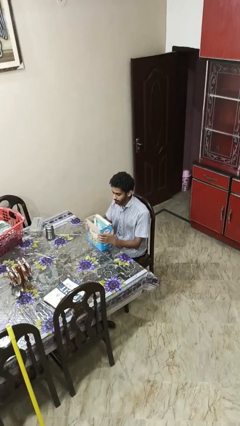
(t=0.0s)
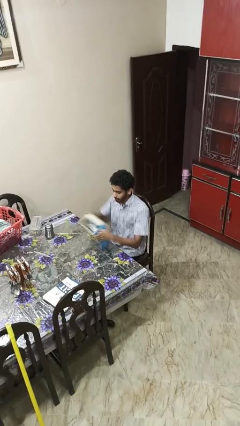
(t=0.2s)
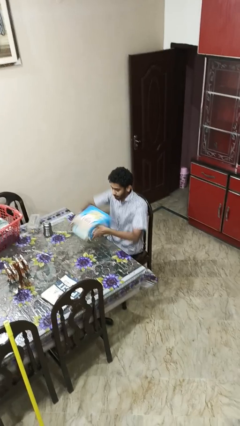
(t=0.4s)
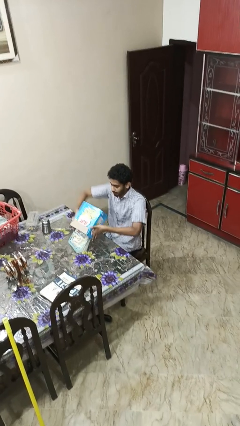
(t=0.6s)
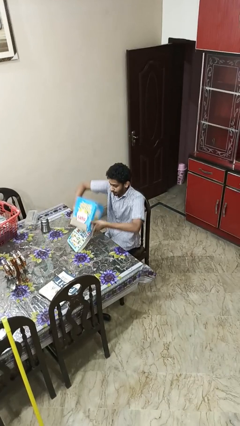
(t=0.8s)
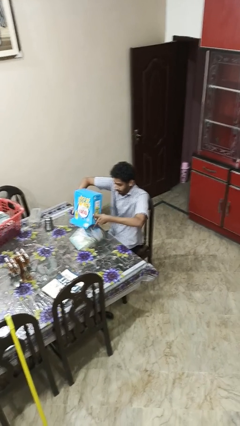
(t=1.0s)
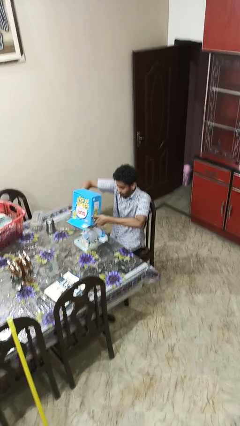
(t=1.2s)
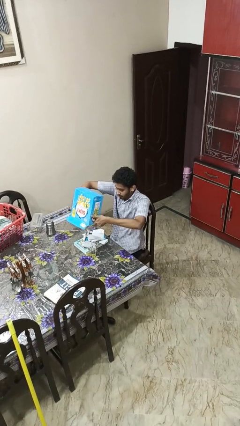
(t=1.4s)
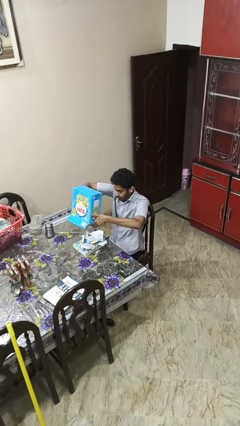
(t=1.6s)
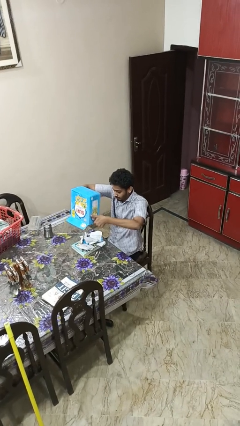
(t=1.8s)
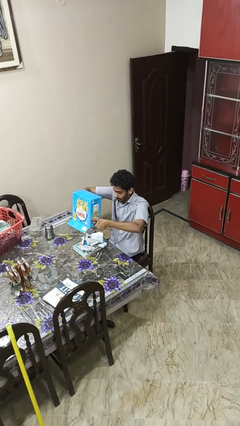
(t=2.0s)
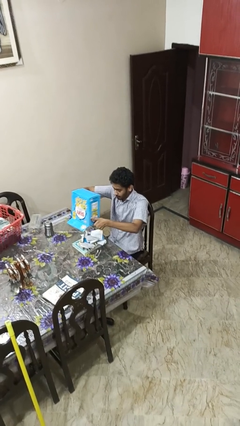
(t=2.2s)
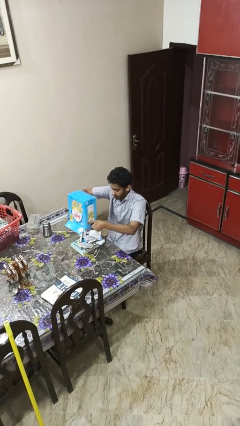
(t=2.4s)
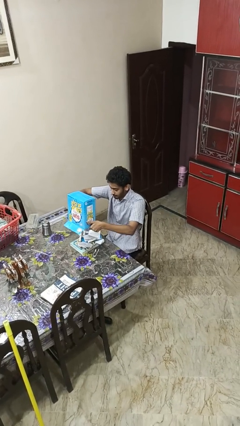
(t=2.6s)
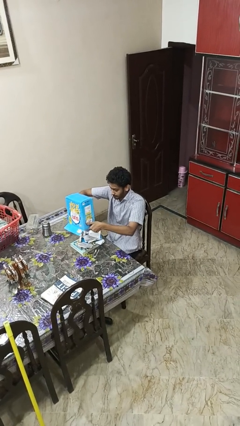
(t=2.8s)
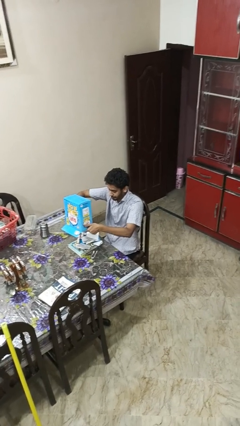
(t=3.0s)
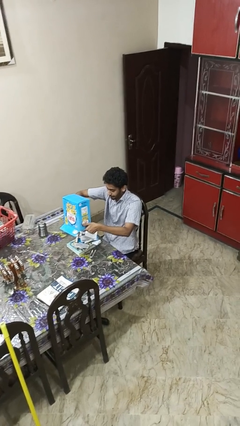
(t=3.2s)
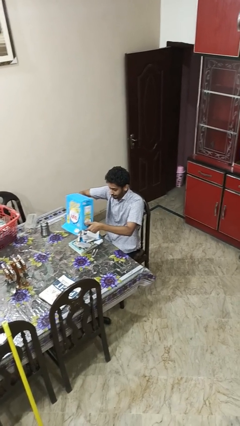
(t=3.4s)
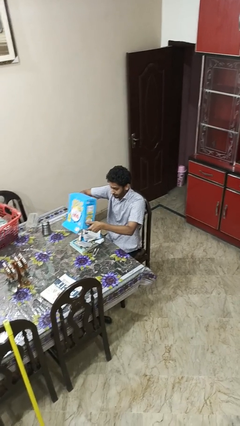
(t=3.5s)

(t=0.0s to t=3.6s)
person unloads box onto table

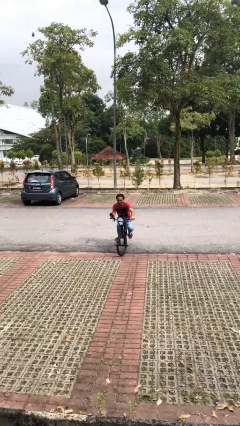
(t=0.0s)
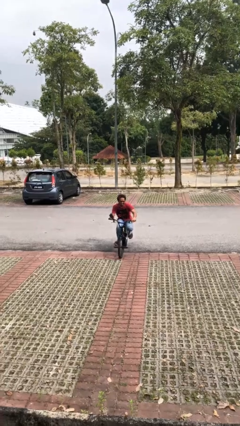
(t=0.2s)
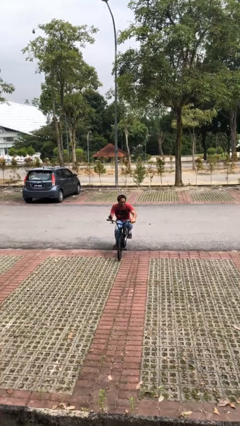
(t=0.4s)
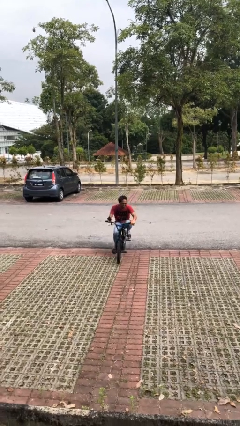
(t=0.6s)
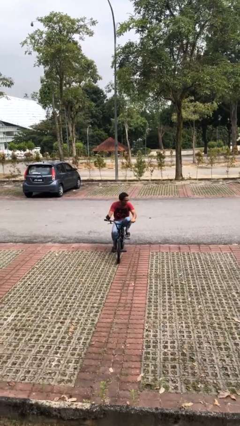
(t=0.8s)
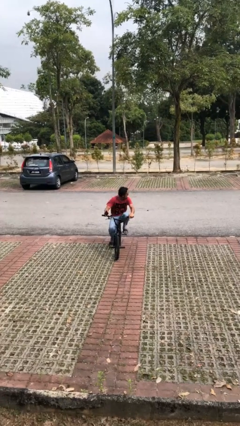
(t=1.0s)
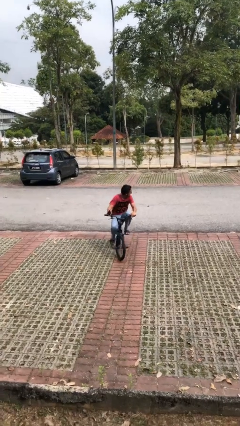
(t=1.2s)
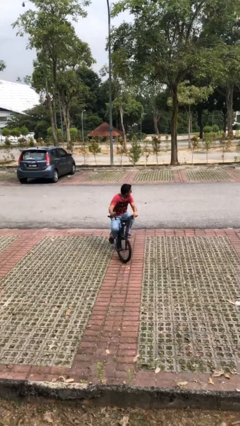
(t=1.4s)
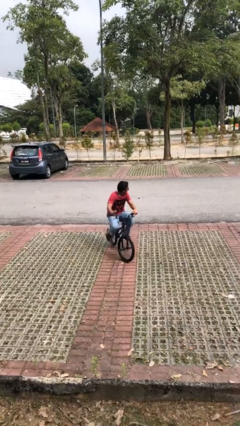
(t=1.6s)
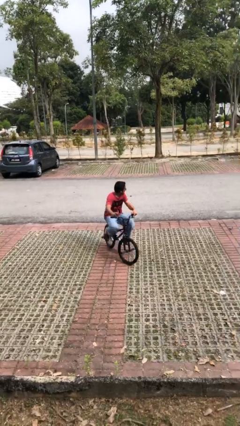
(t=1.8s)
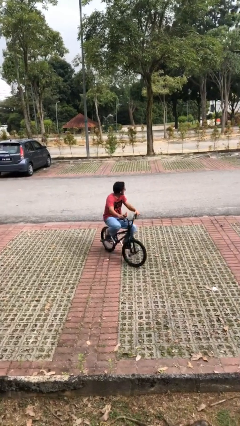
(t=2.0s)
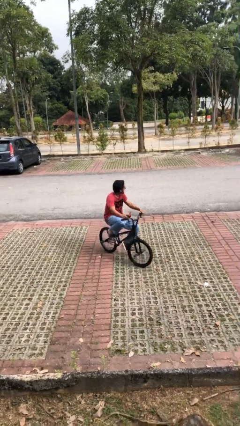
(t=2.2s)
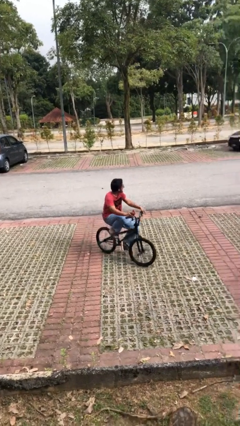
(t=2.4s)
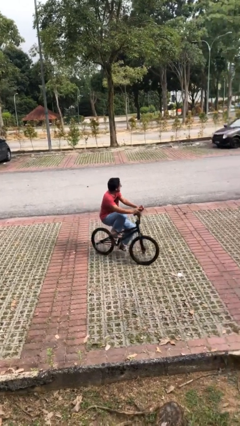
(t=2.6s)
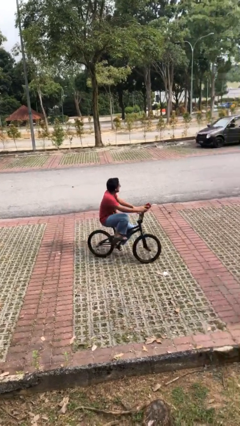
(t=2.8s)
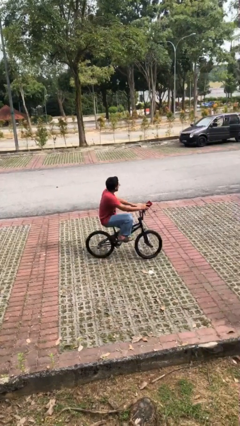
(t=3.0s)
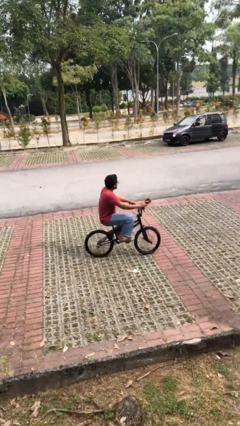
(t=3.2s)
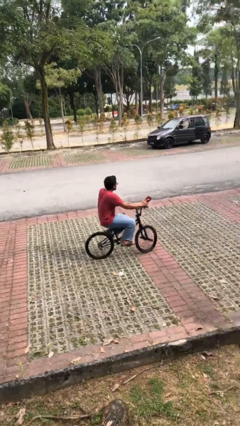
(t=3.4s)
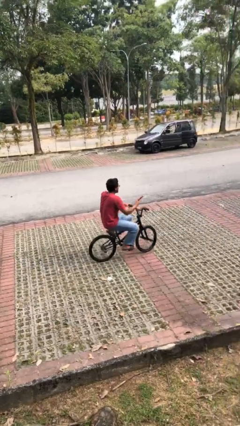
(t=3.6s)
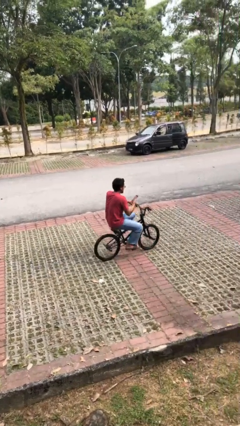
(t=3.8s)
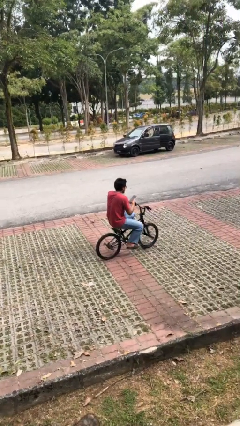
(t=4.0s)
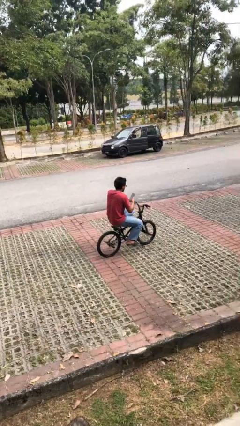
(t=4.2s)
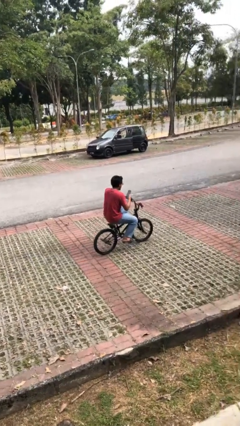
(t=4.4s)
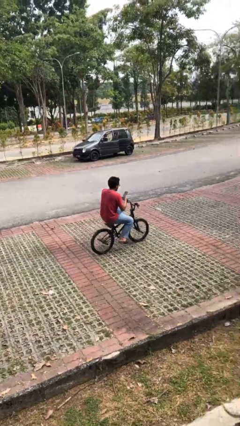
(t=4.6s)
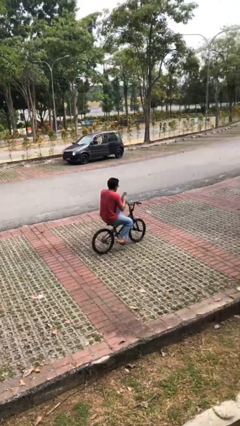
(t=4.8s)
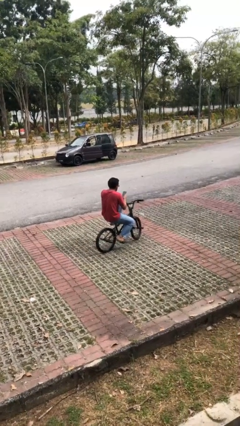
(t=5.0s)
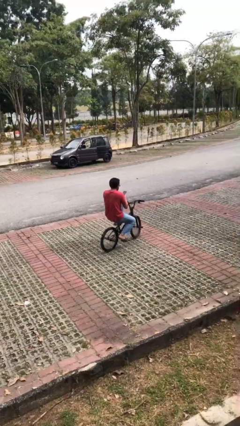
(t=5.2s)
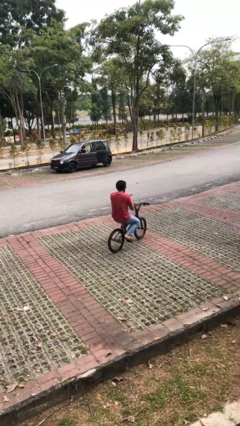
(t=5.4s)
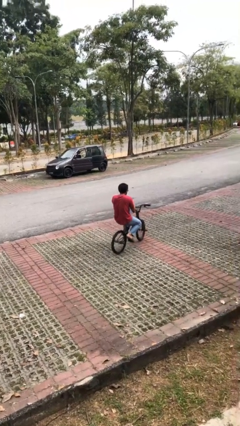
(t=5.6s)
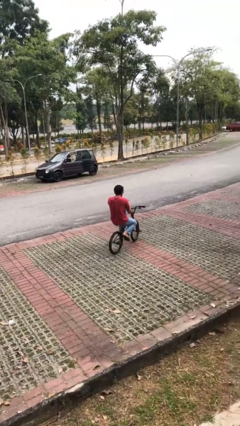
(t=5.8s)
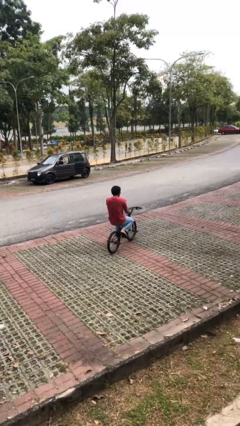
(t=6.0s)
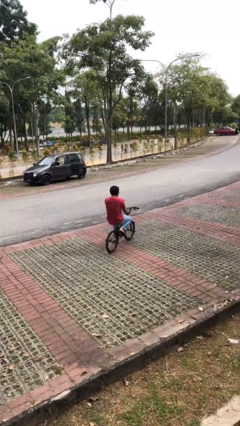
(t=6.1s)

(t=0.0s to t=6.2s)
person rides bicycle

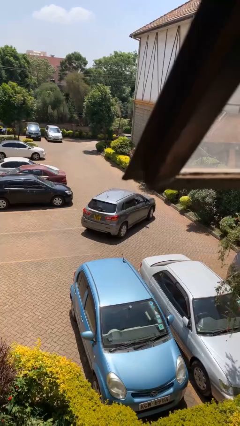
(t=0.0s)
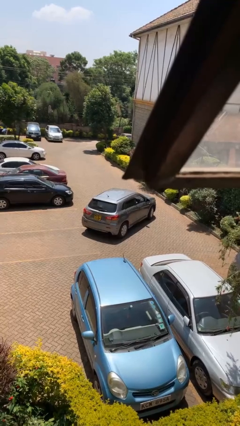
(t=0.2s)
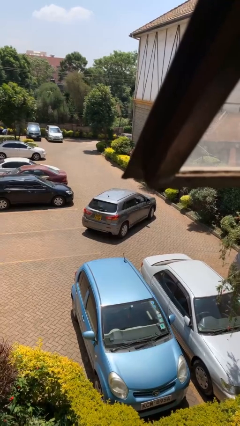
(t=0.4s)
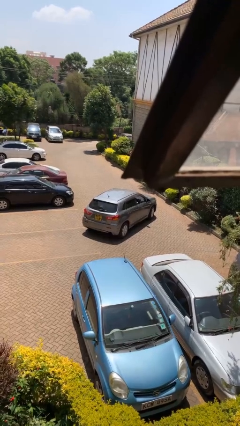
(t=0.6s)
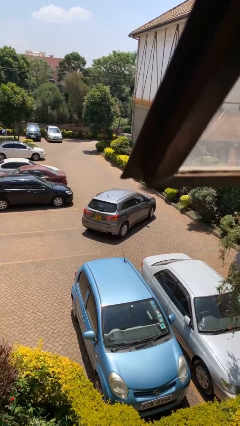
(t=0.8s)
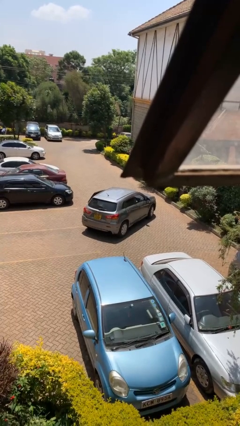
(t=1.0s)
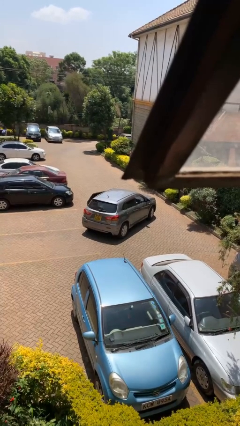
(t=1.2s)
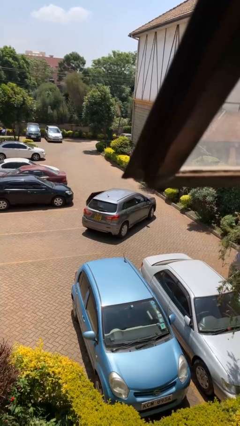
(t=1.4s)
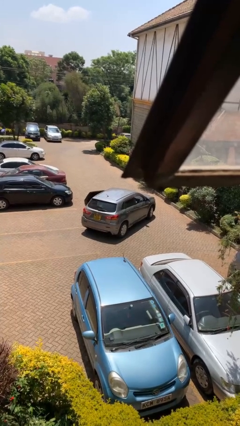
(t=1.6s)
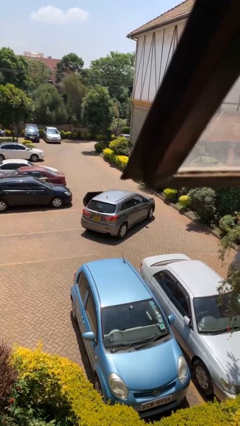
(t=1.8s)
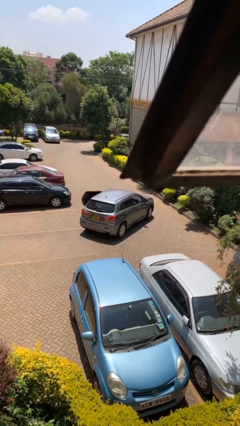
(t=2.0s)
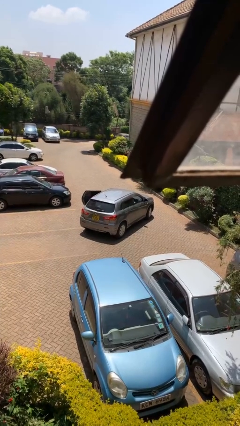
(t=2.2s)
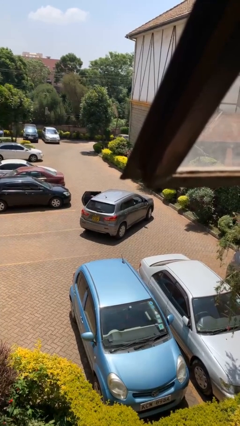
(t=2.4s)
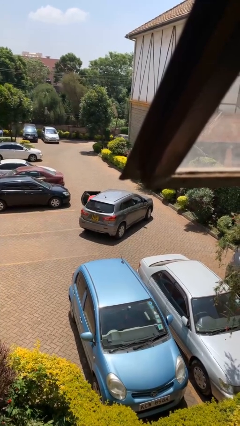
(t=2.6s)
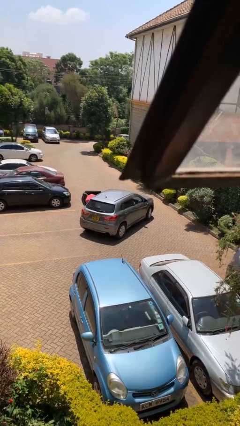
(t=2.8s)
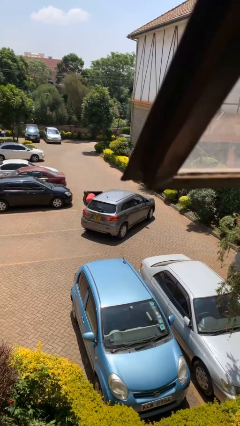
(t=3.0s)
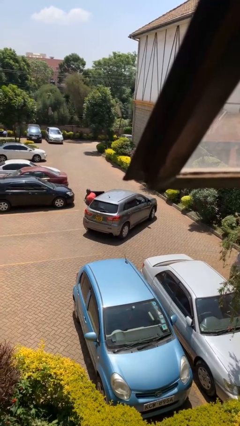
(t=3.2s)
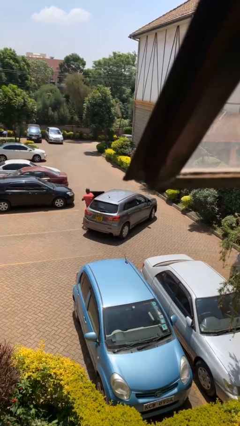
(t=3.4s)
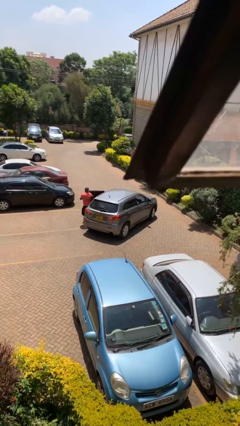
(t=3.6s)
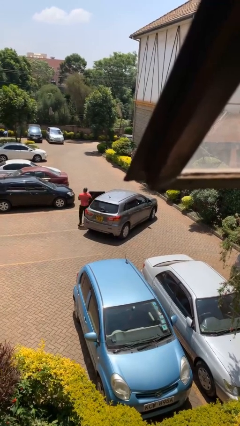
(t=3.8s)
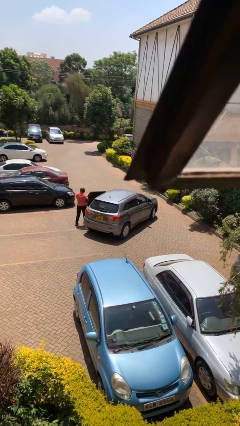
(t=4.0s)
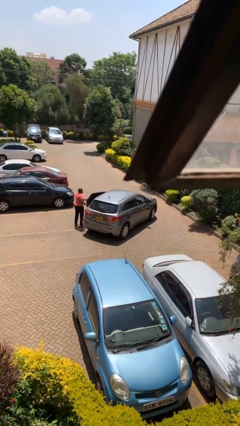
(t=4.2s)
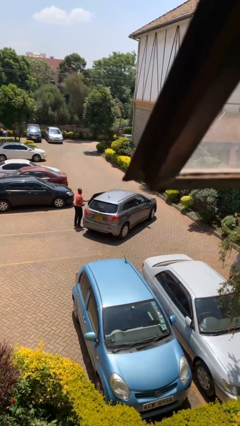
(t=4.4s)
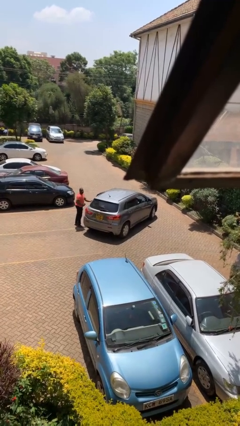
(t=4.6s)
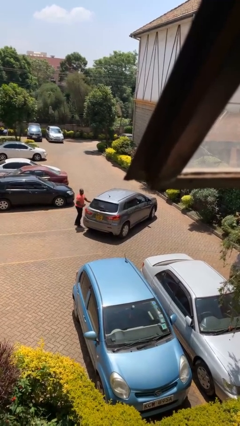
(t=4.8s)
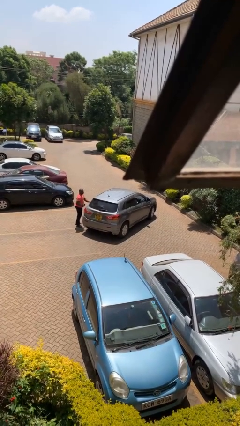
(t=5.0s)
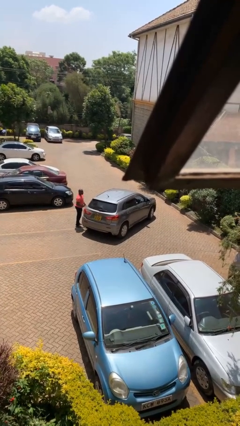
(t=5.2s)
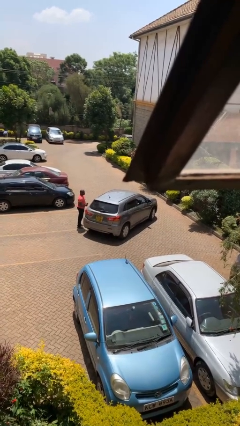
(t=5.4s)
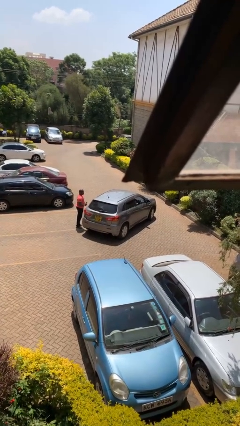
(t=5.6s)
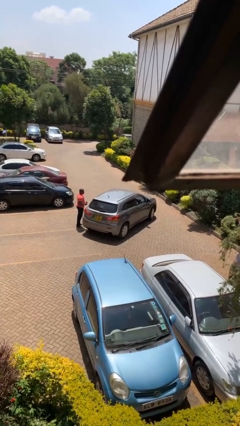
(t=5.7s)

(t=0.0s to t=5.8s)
car drops off person

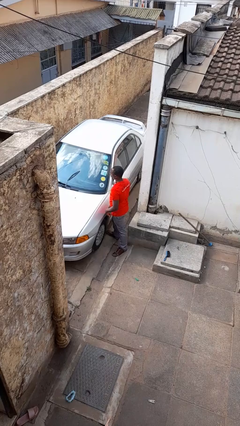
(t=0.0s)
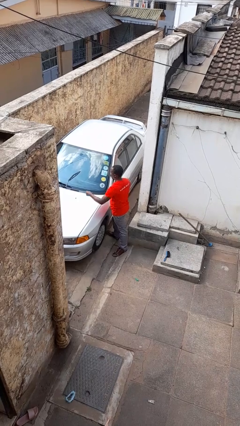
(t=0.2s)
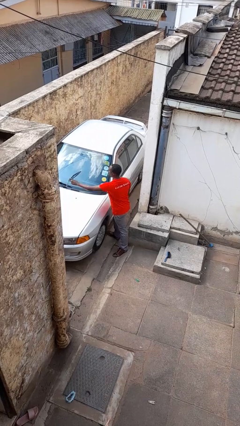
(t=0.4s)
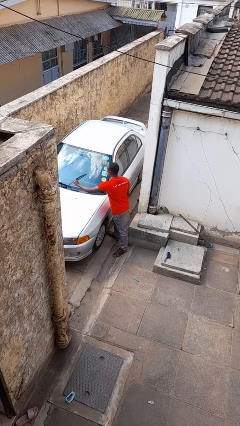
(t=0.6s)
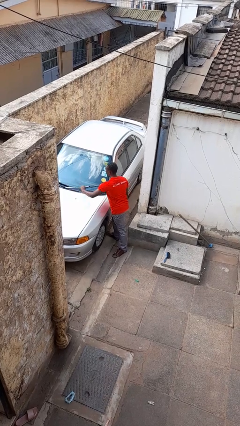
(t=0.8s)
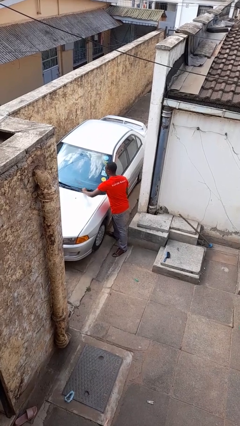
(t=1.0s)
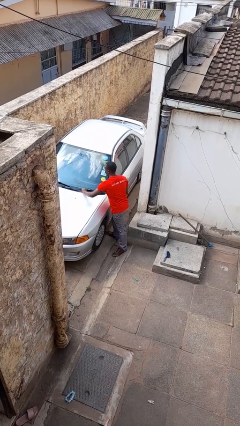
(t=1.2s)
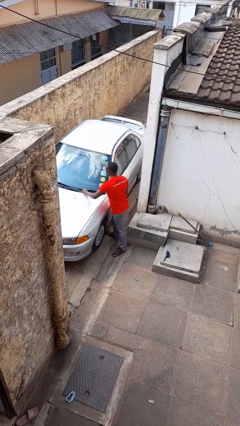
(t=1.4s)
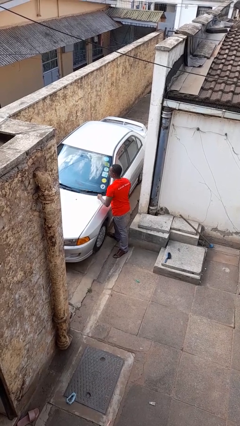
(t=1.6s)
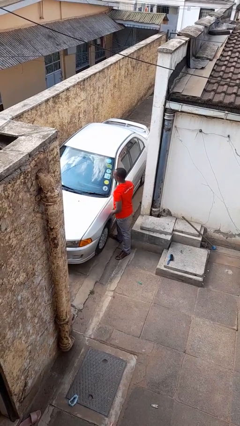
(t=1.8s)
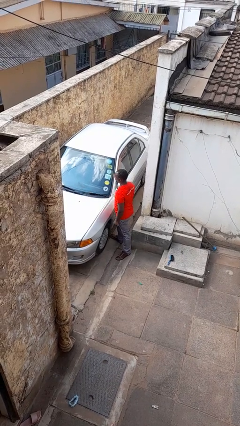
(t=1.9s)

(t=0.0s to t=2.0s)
person flips down car wipers
